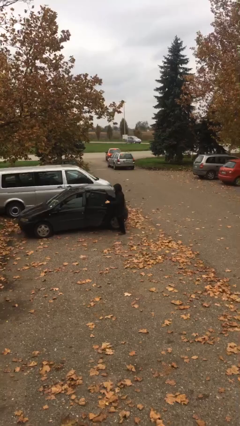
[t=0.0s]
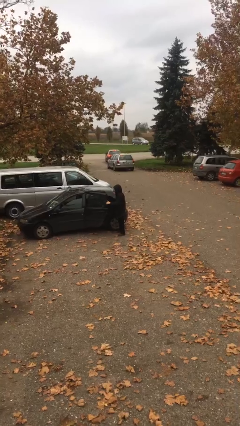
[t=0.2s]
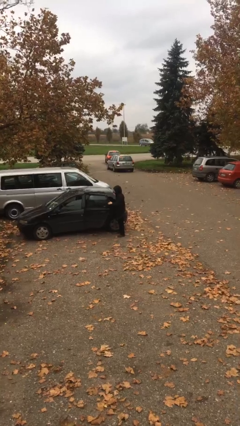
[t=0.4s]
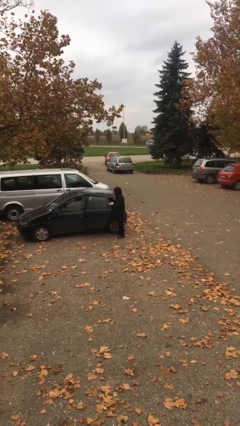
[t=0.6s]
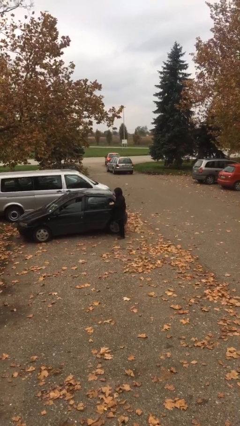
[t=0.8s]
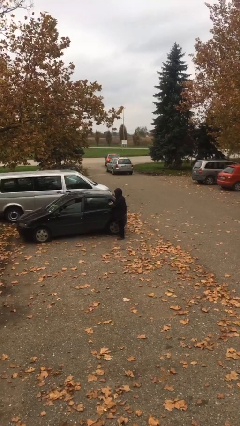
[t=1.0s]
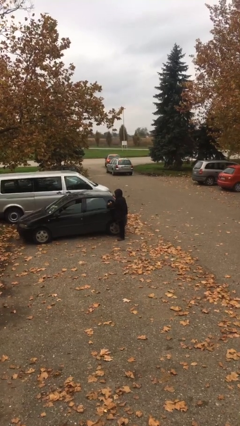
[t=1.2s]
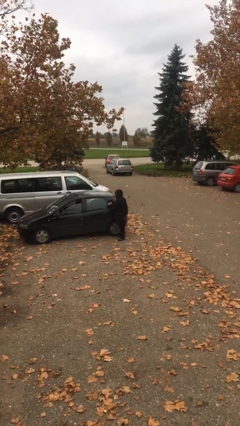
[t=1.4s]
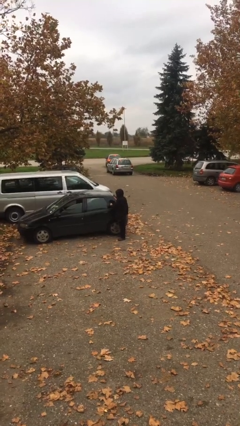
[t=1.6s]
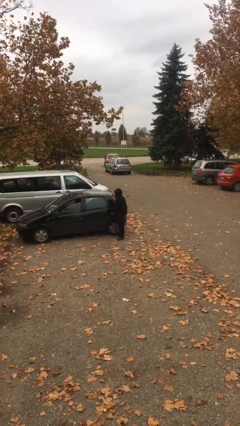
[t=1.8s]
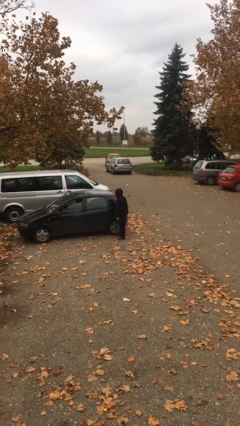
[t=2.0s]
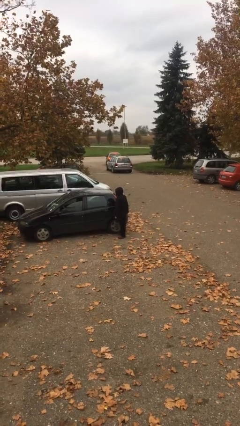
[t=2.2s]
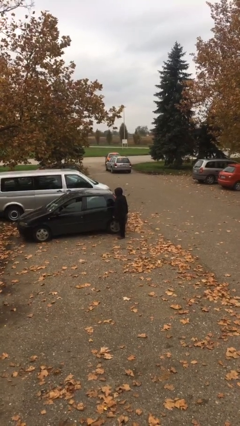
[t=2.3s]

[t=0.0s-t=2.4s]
person closes car door

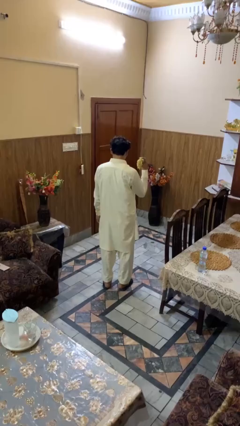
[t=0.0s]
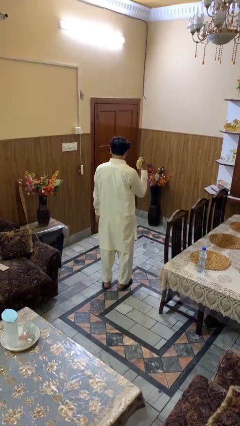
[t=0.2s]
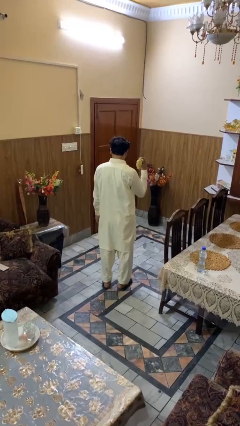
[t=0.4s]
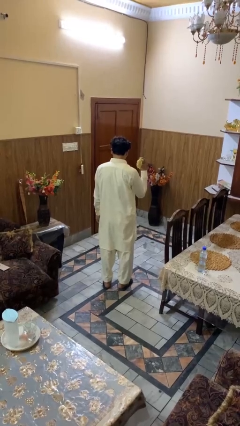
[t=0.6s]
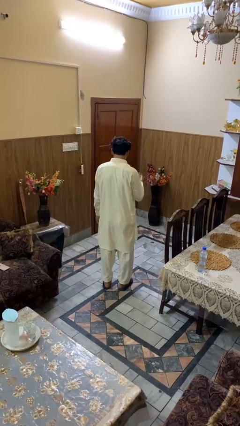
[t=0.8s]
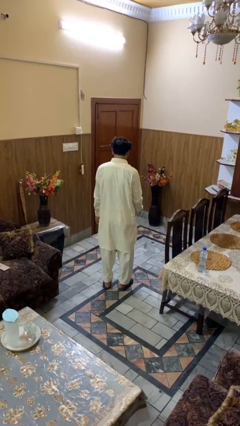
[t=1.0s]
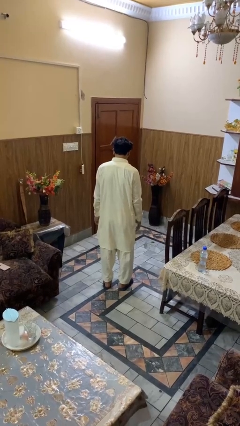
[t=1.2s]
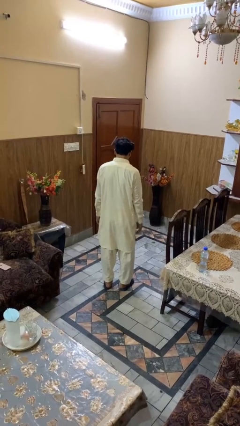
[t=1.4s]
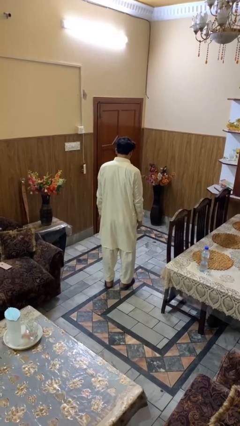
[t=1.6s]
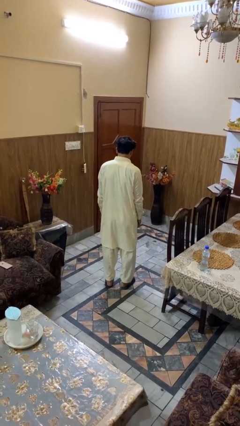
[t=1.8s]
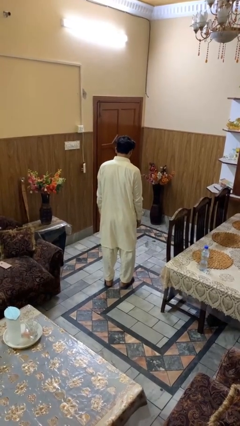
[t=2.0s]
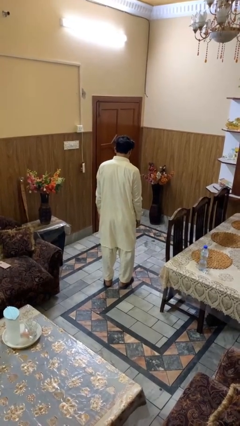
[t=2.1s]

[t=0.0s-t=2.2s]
person throws object to ground

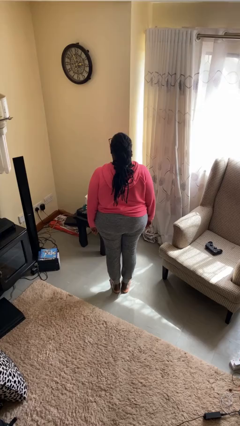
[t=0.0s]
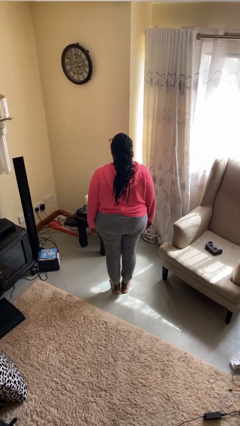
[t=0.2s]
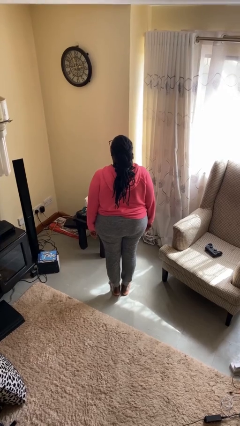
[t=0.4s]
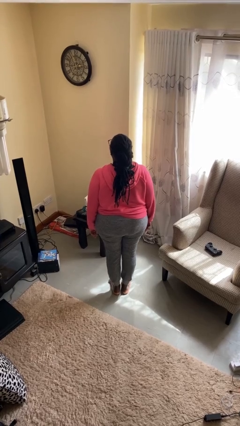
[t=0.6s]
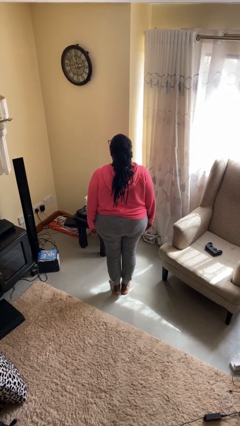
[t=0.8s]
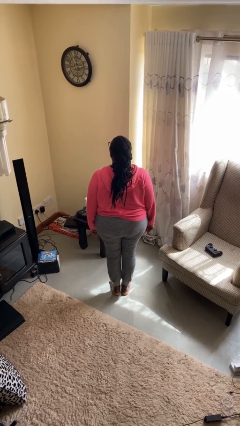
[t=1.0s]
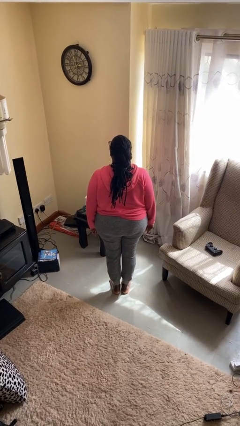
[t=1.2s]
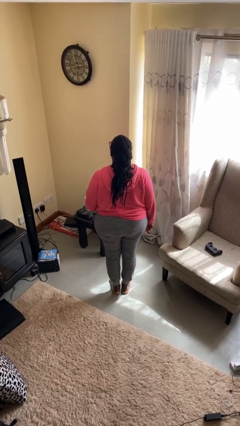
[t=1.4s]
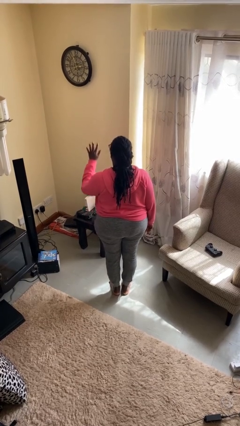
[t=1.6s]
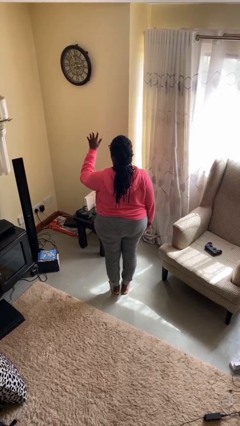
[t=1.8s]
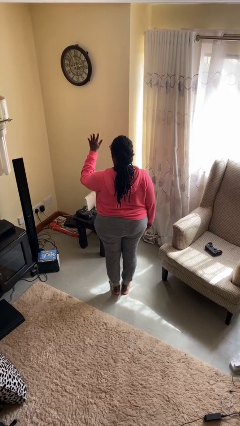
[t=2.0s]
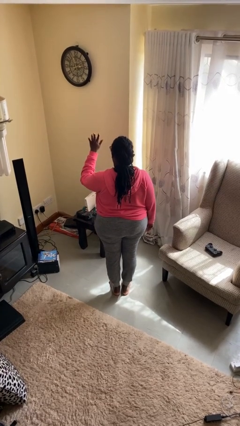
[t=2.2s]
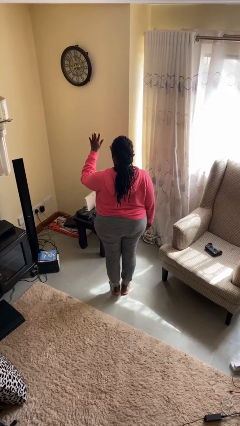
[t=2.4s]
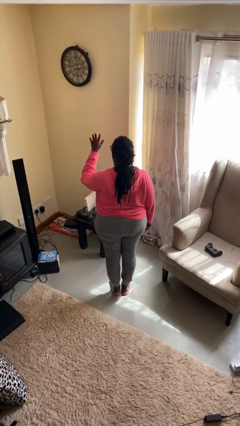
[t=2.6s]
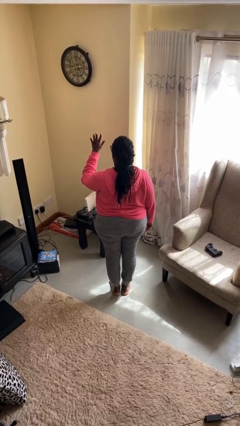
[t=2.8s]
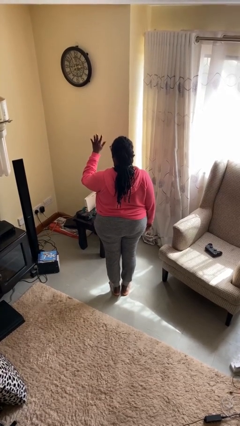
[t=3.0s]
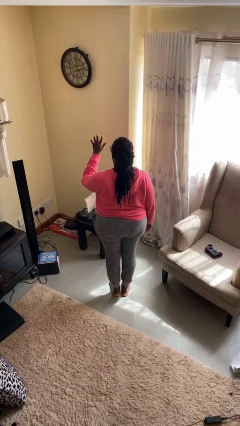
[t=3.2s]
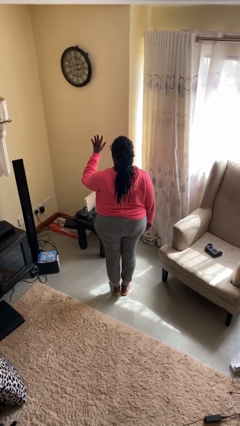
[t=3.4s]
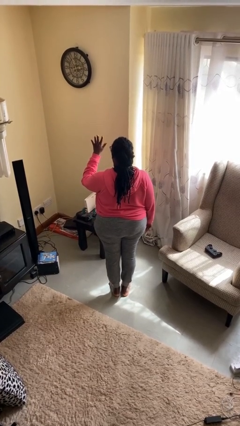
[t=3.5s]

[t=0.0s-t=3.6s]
person gestures number five

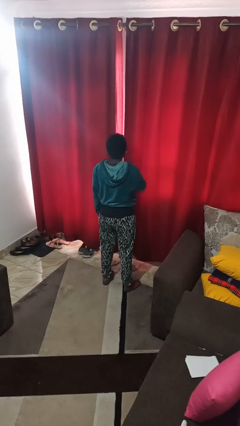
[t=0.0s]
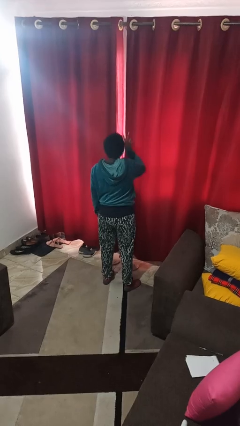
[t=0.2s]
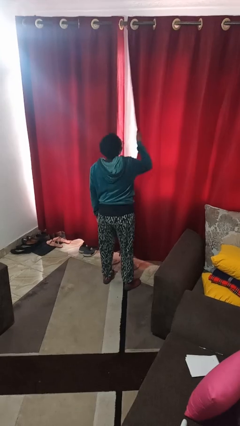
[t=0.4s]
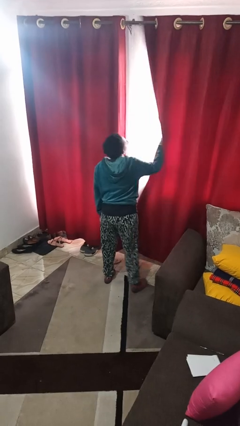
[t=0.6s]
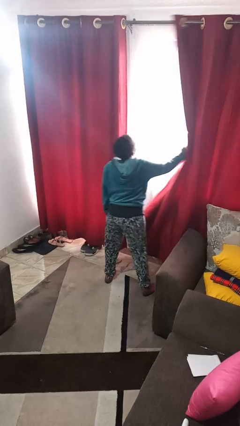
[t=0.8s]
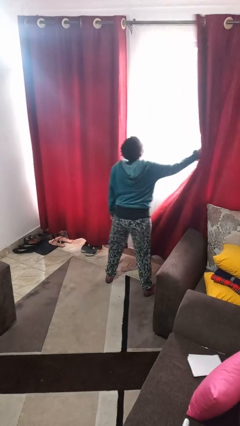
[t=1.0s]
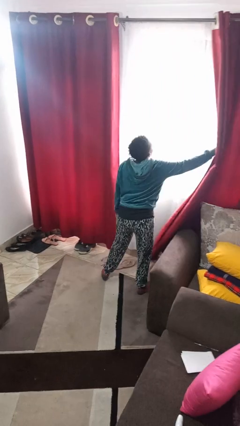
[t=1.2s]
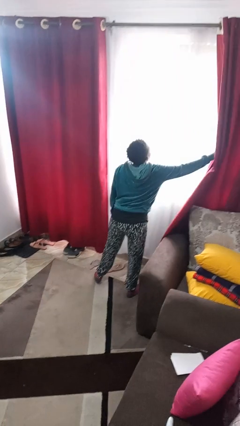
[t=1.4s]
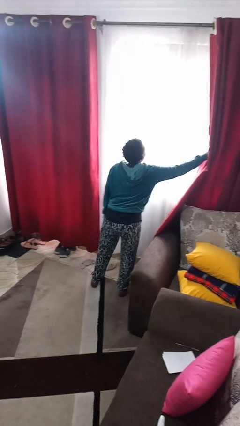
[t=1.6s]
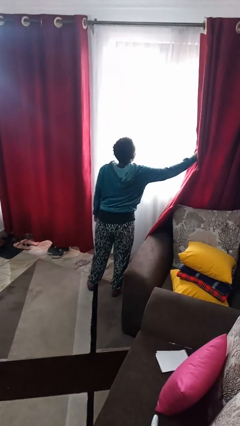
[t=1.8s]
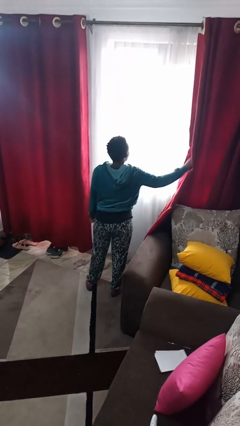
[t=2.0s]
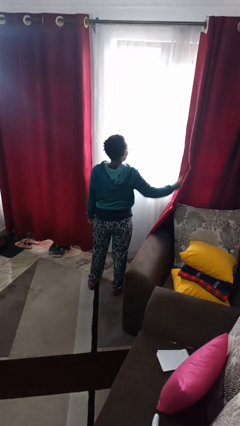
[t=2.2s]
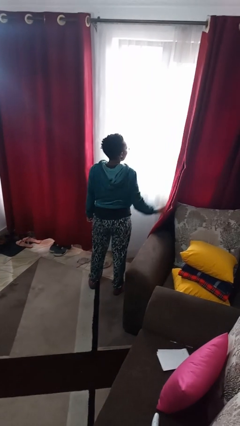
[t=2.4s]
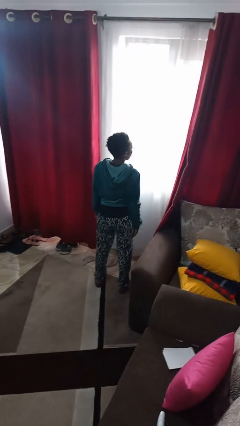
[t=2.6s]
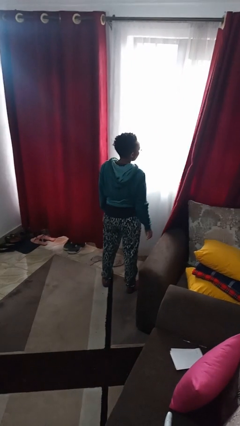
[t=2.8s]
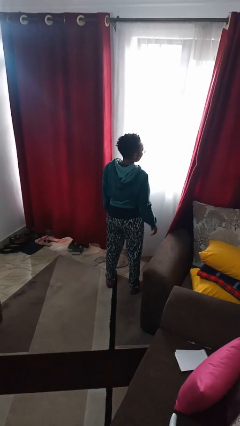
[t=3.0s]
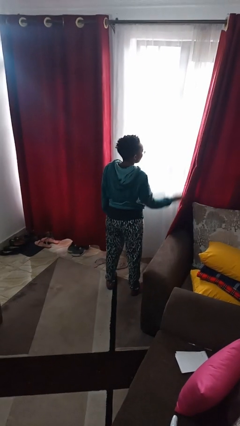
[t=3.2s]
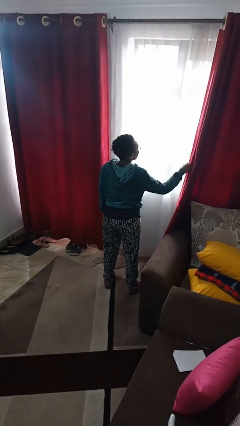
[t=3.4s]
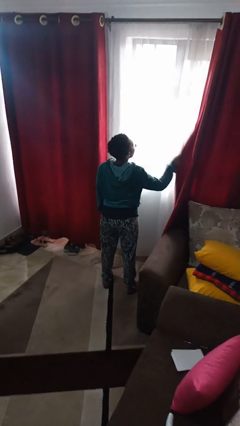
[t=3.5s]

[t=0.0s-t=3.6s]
person opens curtains

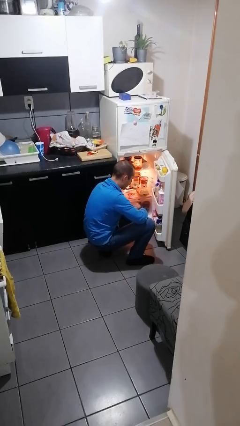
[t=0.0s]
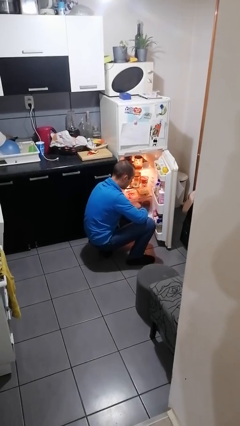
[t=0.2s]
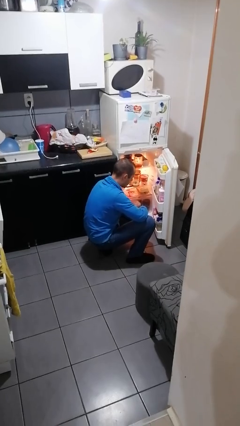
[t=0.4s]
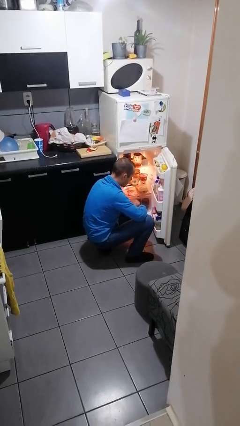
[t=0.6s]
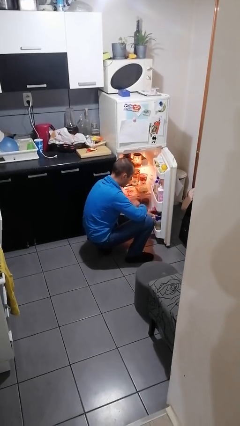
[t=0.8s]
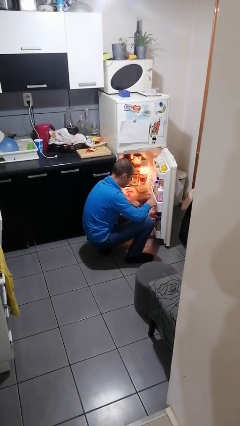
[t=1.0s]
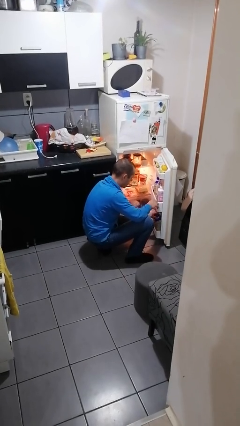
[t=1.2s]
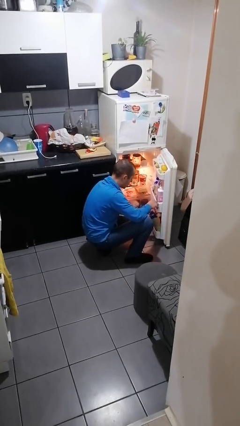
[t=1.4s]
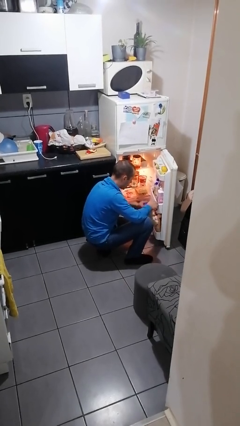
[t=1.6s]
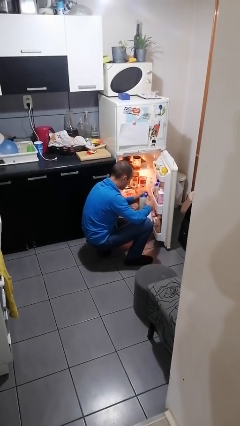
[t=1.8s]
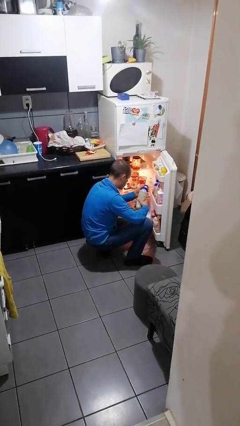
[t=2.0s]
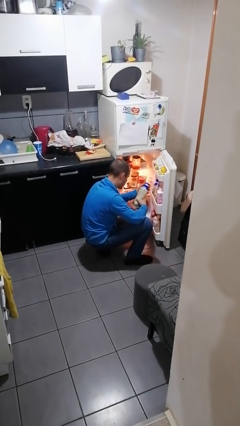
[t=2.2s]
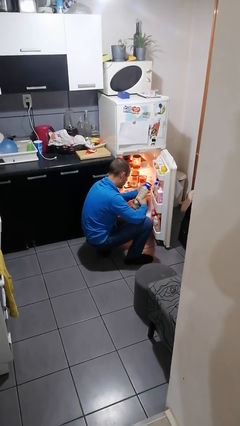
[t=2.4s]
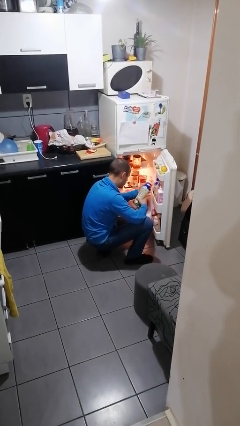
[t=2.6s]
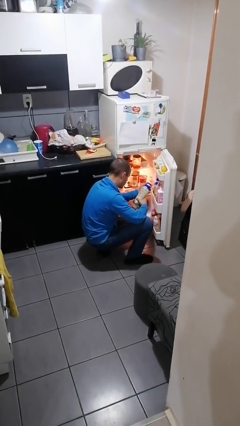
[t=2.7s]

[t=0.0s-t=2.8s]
person takes object from refrigerator

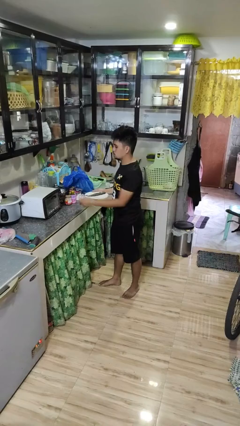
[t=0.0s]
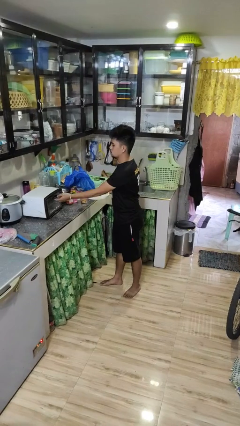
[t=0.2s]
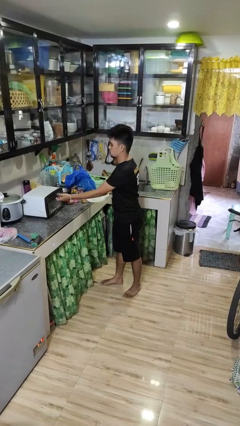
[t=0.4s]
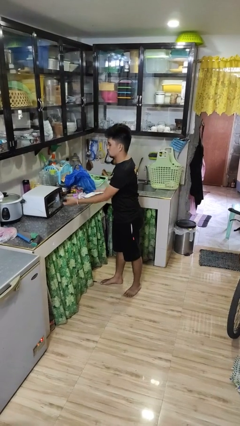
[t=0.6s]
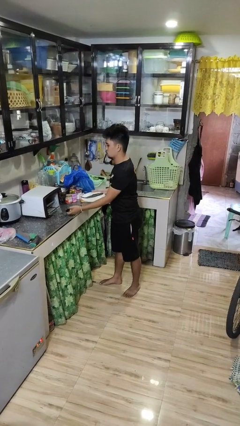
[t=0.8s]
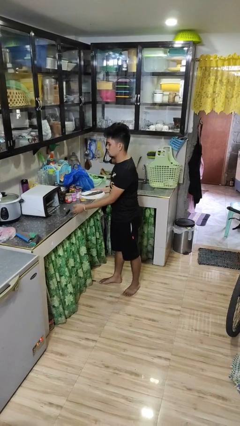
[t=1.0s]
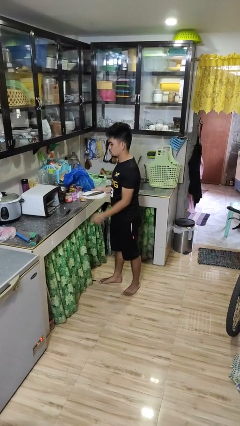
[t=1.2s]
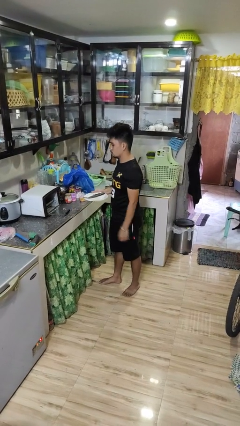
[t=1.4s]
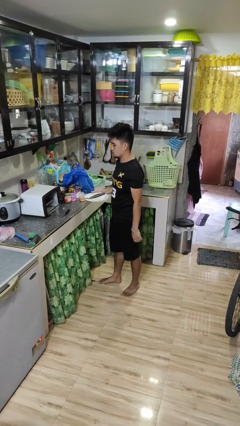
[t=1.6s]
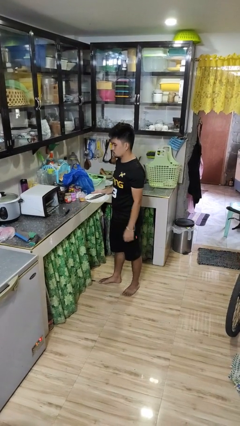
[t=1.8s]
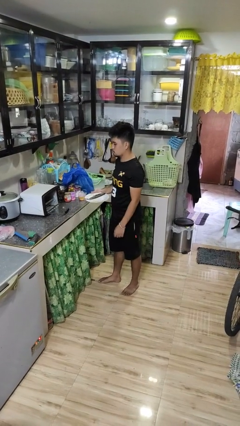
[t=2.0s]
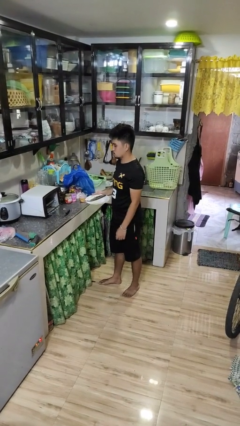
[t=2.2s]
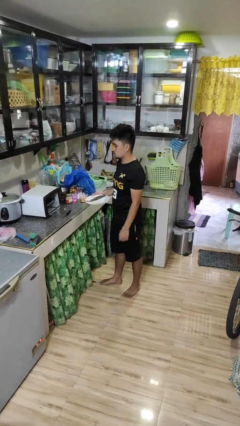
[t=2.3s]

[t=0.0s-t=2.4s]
person opens microwave
